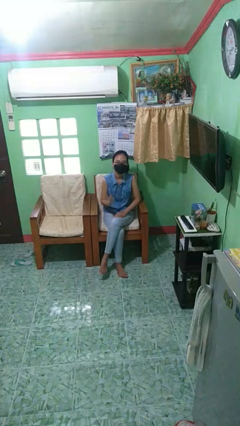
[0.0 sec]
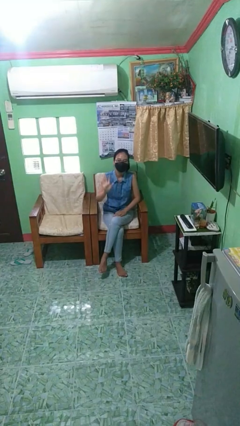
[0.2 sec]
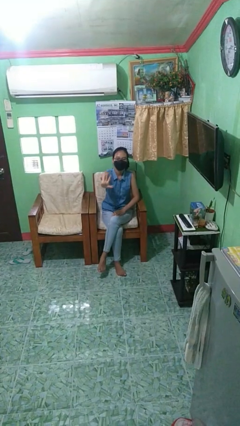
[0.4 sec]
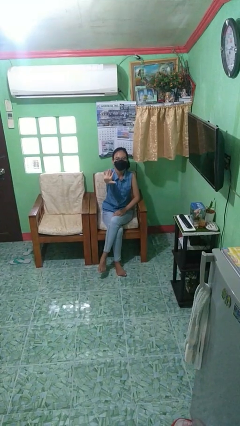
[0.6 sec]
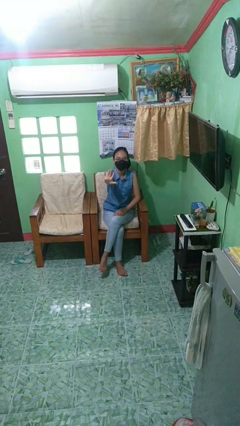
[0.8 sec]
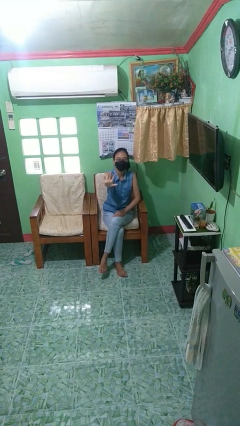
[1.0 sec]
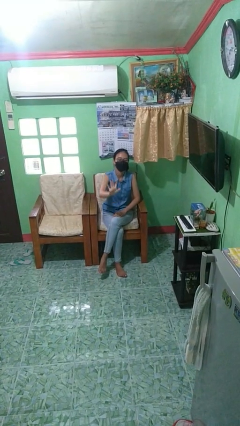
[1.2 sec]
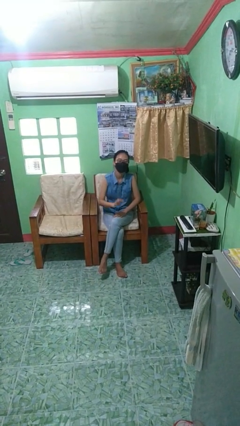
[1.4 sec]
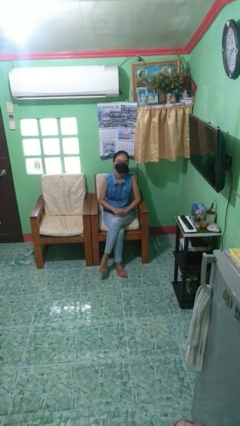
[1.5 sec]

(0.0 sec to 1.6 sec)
person gestures stop

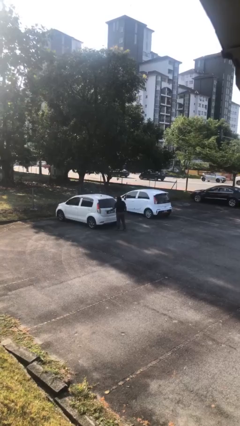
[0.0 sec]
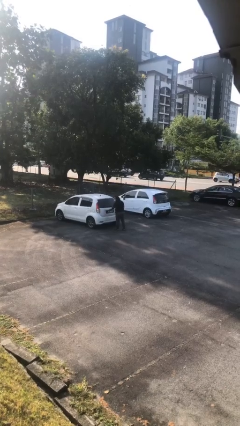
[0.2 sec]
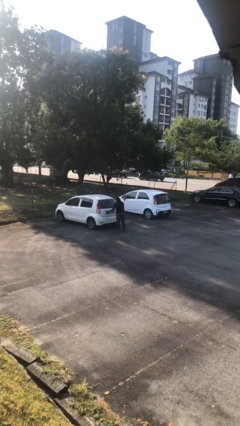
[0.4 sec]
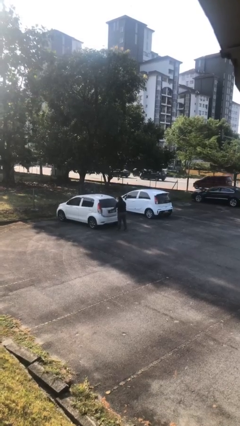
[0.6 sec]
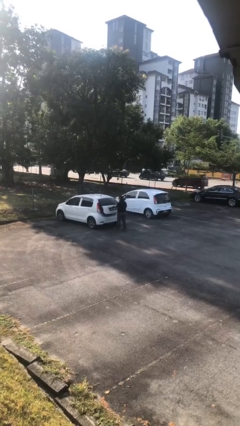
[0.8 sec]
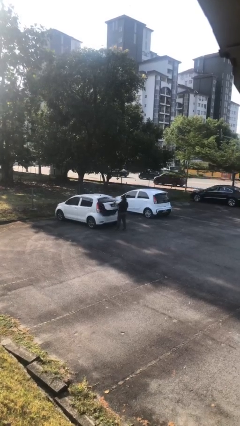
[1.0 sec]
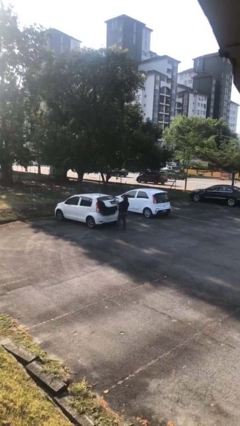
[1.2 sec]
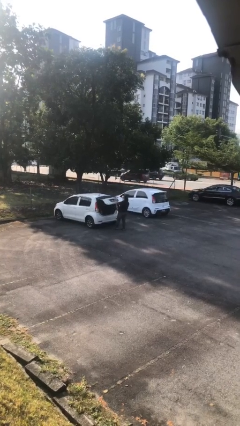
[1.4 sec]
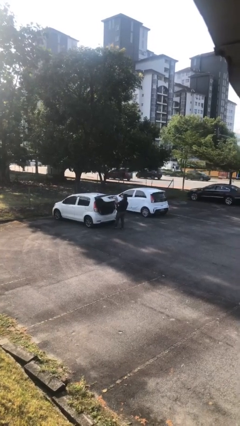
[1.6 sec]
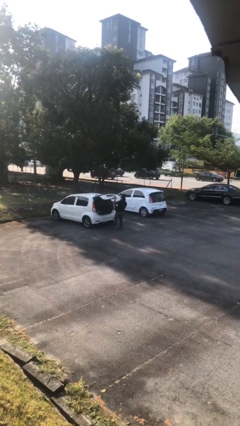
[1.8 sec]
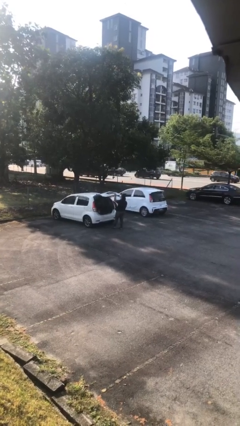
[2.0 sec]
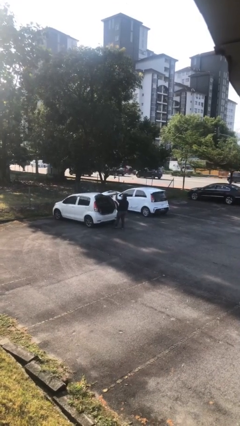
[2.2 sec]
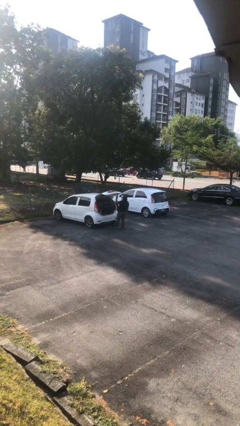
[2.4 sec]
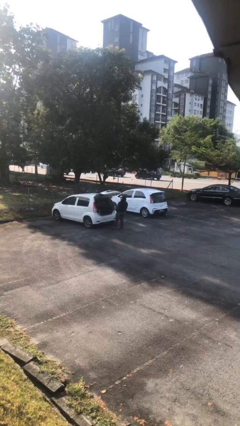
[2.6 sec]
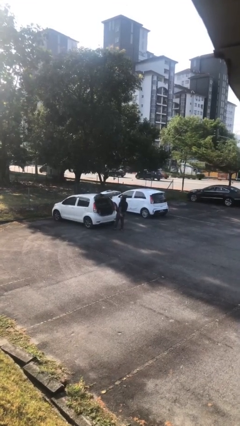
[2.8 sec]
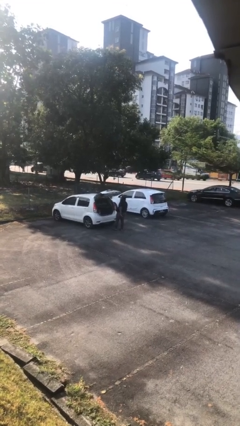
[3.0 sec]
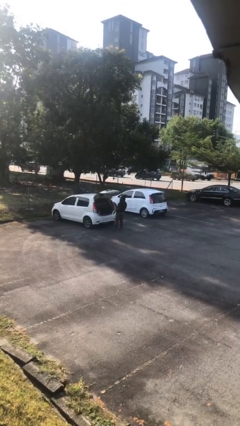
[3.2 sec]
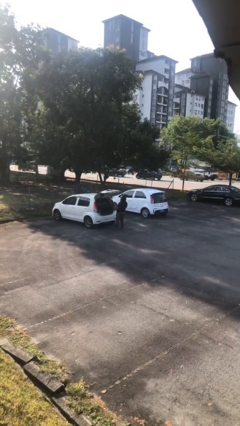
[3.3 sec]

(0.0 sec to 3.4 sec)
person opens car trunk

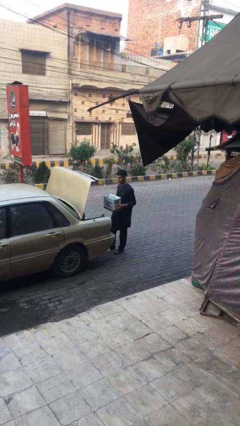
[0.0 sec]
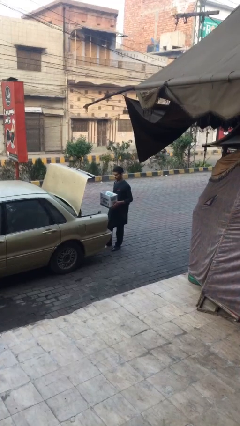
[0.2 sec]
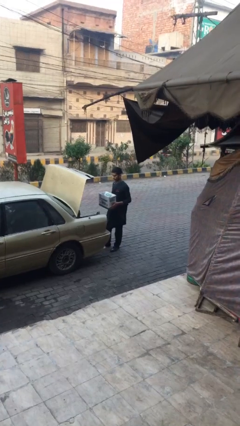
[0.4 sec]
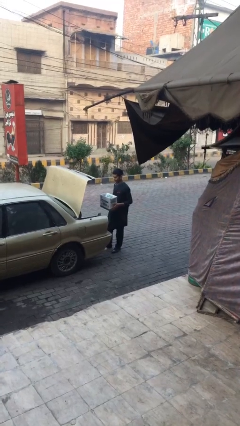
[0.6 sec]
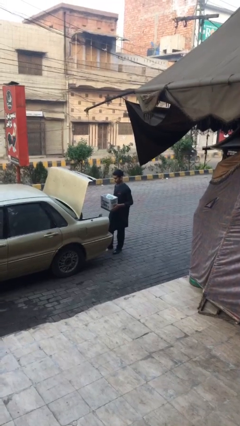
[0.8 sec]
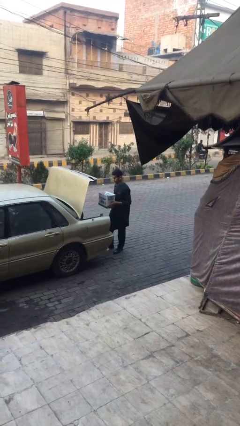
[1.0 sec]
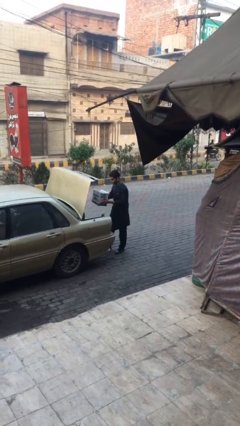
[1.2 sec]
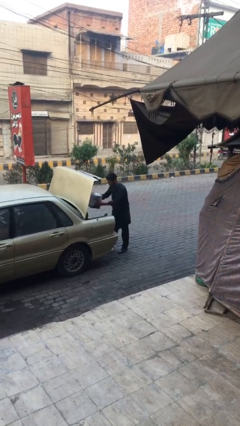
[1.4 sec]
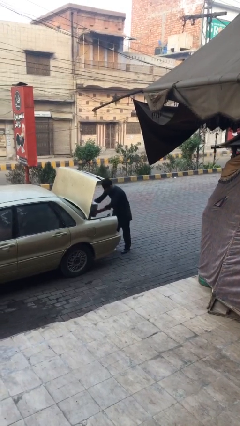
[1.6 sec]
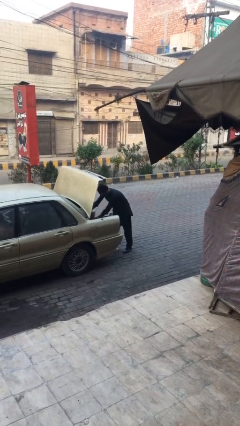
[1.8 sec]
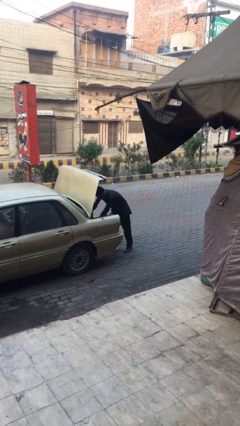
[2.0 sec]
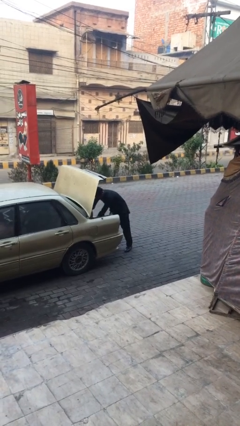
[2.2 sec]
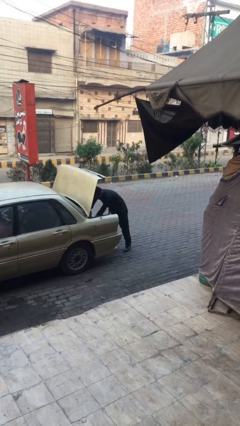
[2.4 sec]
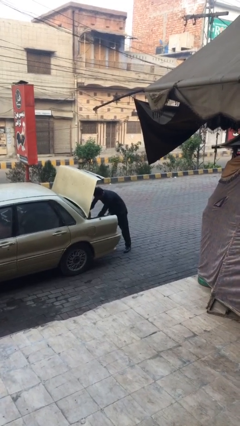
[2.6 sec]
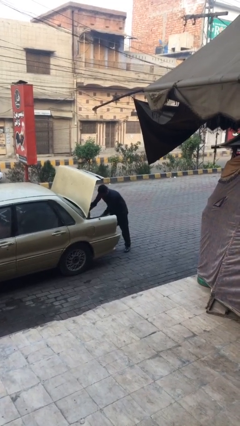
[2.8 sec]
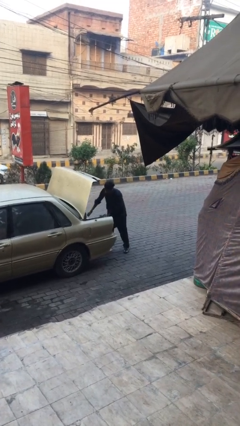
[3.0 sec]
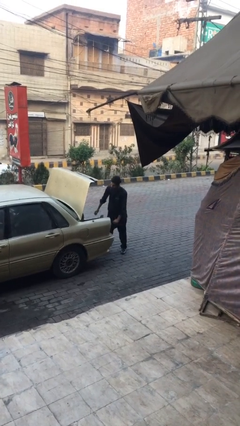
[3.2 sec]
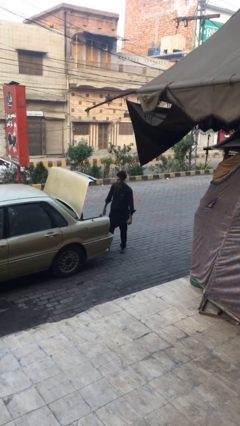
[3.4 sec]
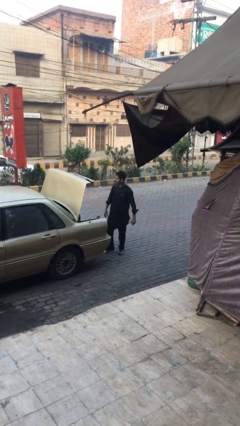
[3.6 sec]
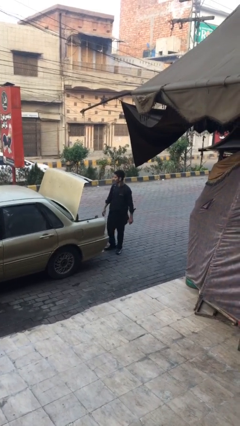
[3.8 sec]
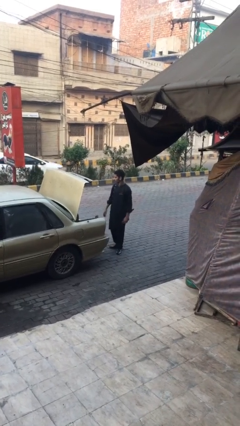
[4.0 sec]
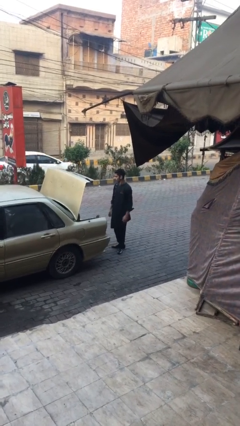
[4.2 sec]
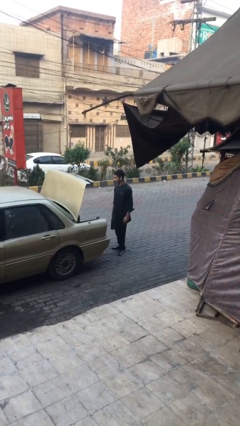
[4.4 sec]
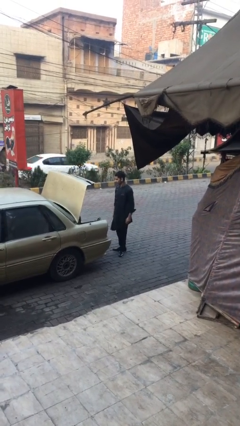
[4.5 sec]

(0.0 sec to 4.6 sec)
person loads car

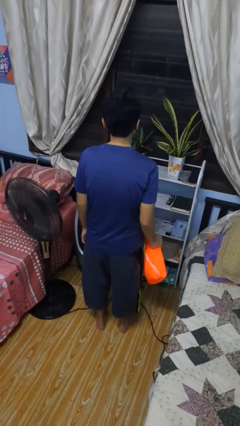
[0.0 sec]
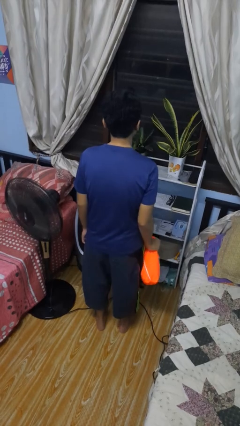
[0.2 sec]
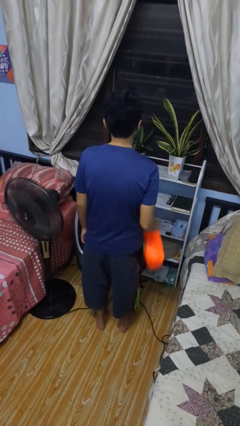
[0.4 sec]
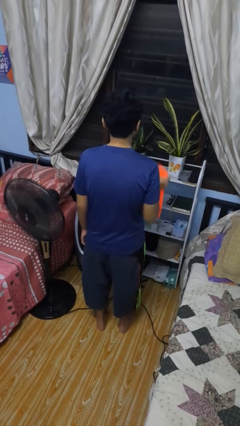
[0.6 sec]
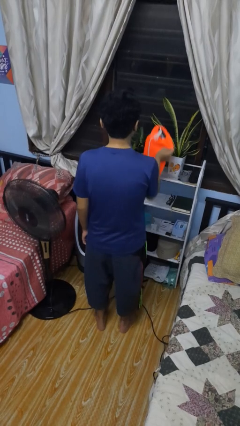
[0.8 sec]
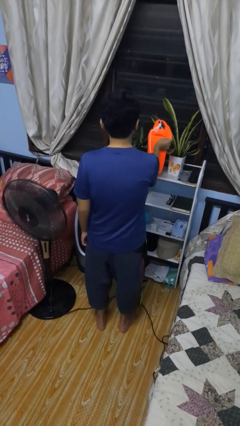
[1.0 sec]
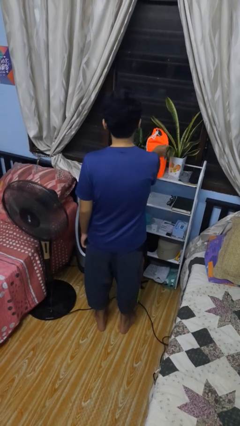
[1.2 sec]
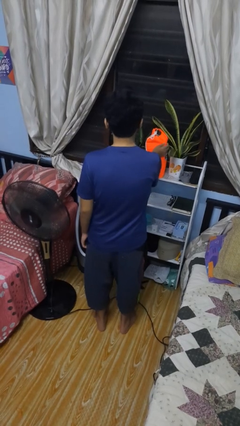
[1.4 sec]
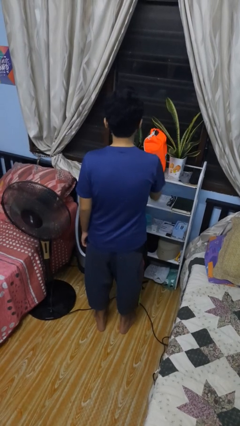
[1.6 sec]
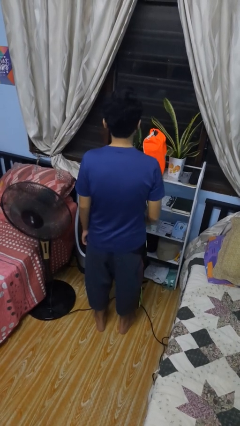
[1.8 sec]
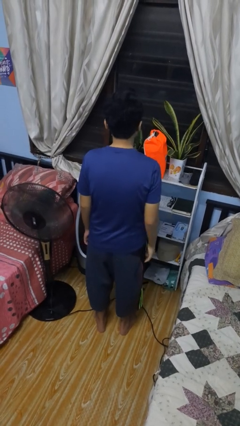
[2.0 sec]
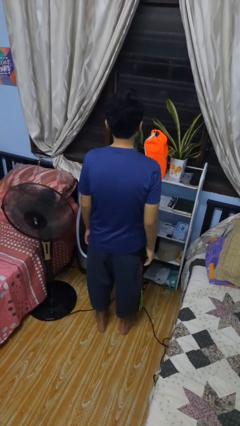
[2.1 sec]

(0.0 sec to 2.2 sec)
person puts down object on countertop

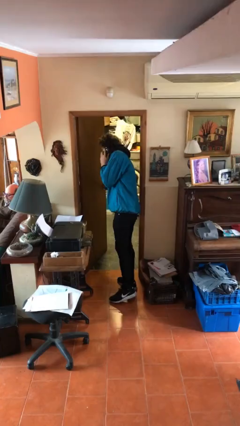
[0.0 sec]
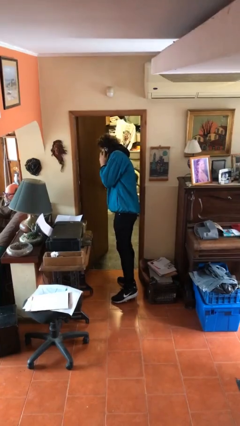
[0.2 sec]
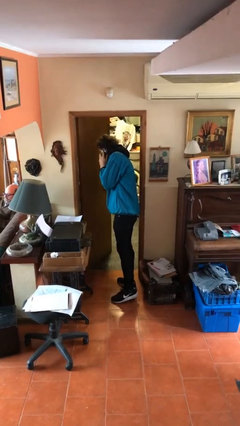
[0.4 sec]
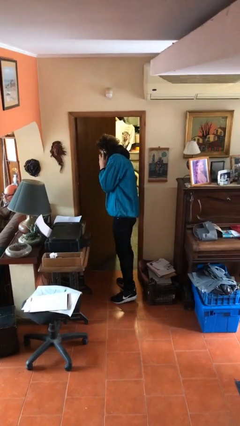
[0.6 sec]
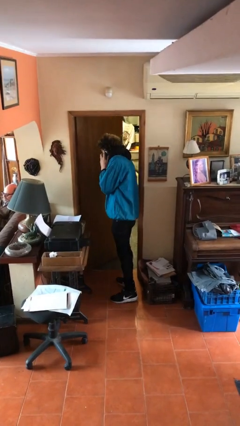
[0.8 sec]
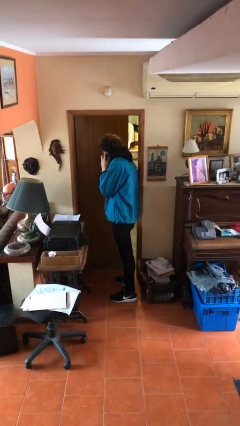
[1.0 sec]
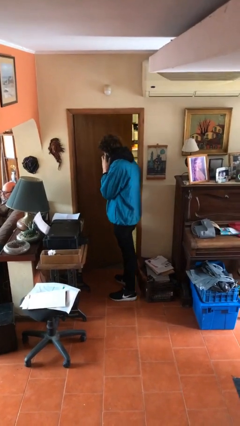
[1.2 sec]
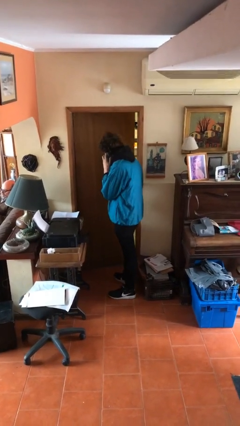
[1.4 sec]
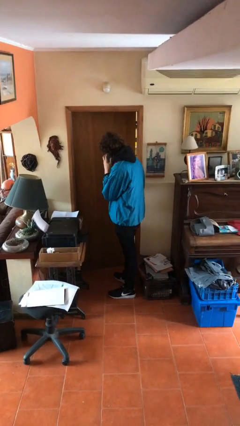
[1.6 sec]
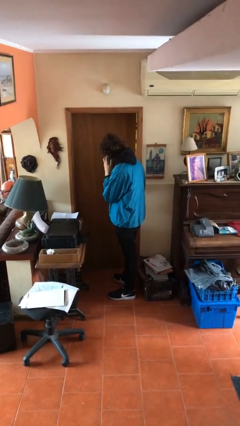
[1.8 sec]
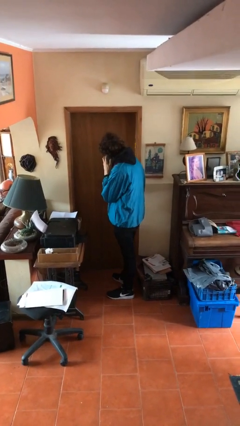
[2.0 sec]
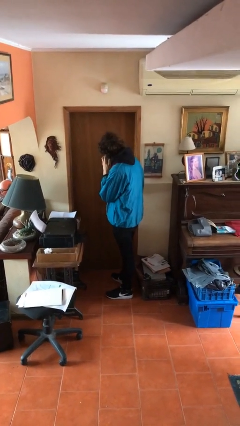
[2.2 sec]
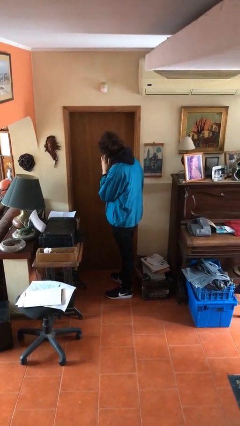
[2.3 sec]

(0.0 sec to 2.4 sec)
person closes facility door

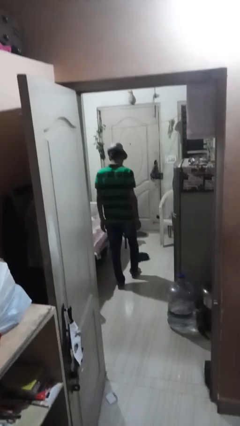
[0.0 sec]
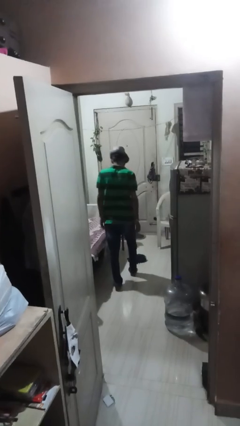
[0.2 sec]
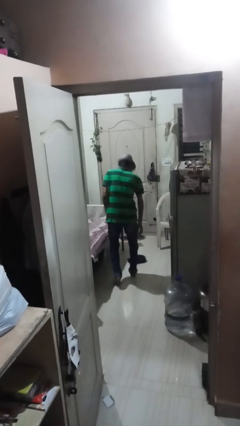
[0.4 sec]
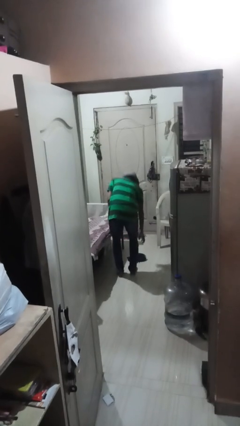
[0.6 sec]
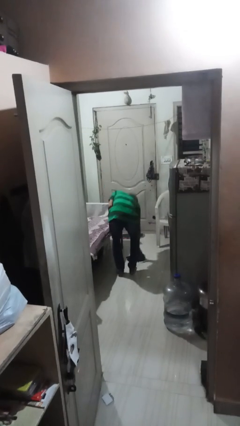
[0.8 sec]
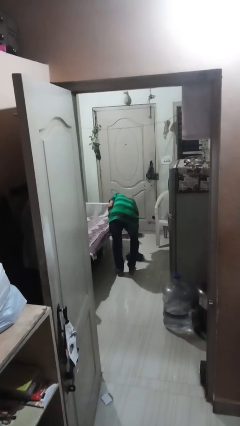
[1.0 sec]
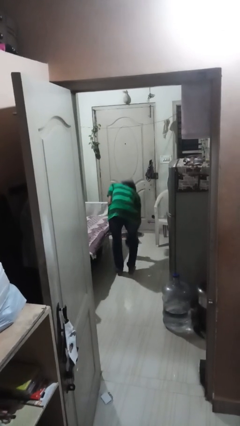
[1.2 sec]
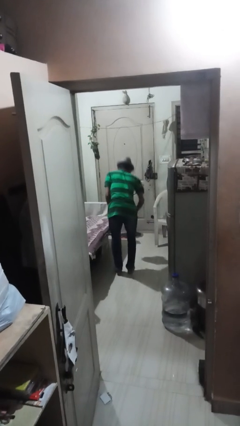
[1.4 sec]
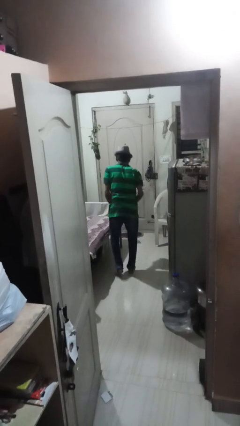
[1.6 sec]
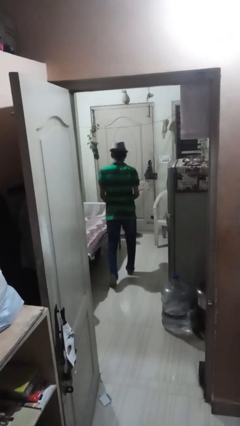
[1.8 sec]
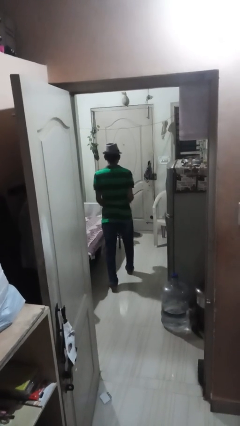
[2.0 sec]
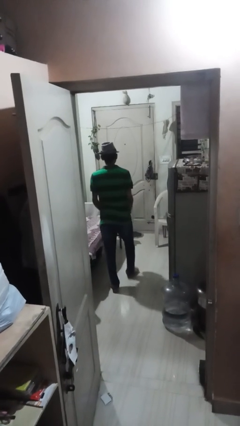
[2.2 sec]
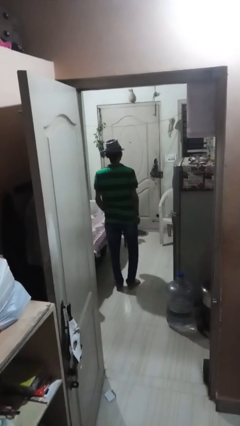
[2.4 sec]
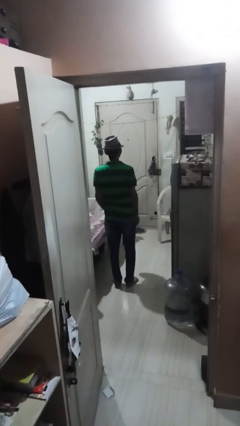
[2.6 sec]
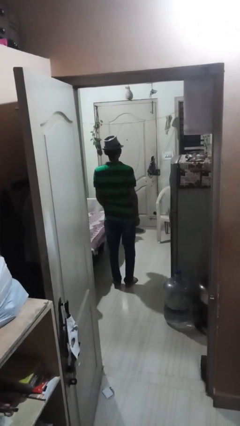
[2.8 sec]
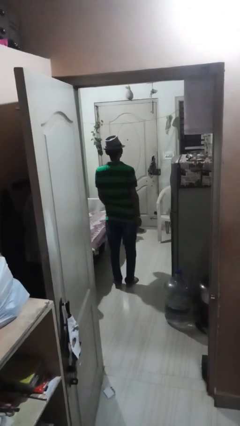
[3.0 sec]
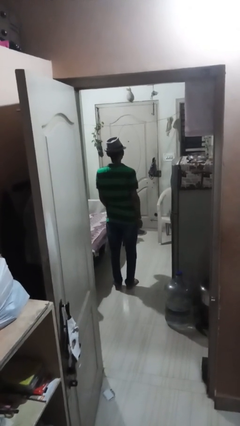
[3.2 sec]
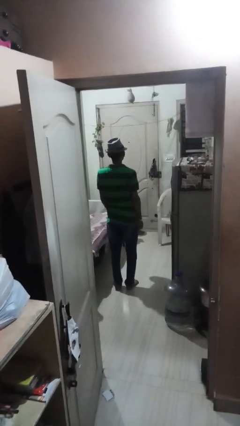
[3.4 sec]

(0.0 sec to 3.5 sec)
person picks up object from floor
